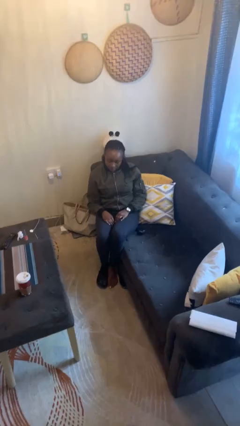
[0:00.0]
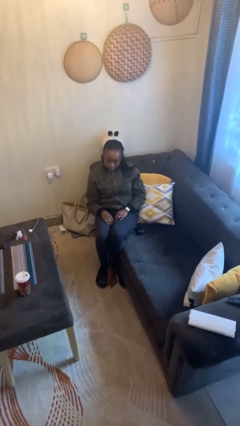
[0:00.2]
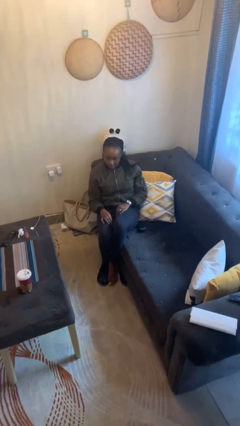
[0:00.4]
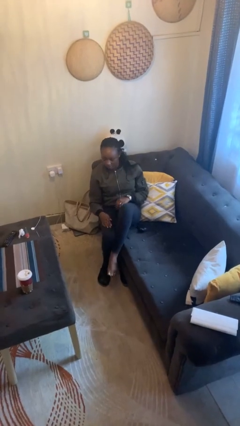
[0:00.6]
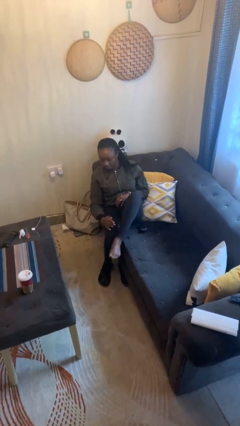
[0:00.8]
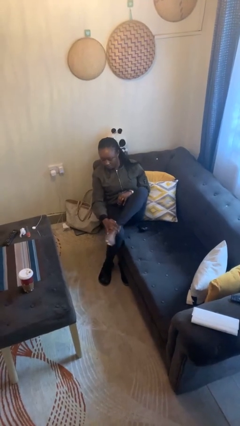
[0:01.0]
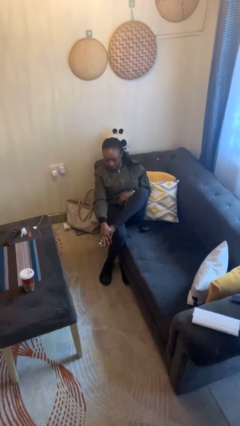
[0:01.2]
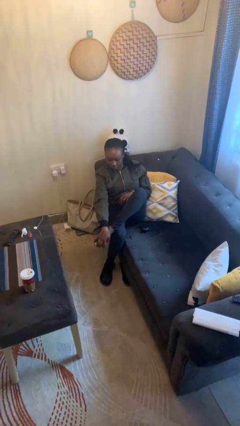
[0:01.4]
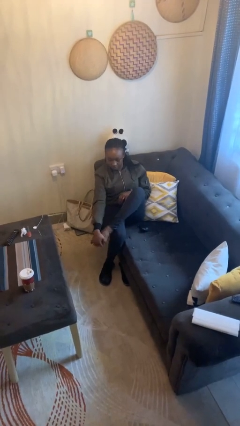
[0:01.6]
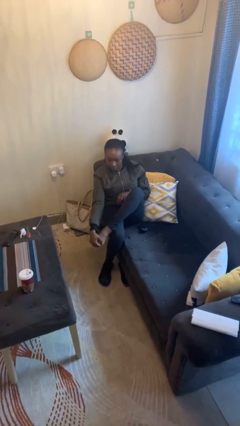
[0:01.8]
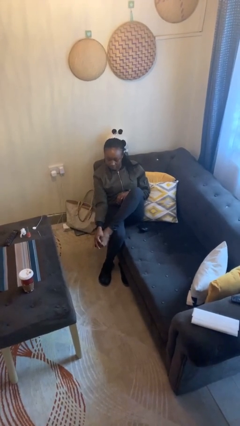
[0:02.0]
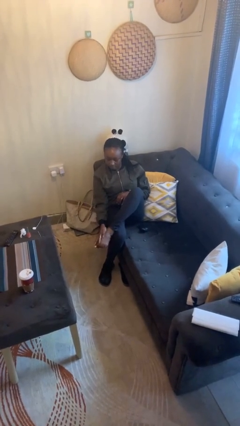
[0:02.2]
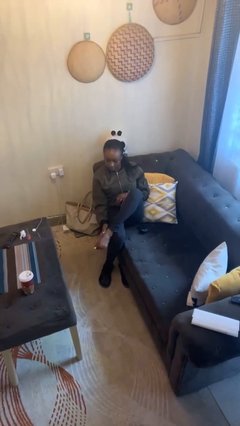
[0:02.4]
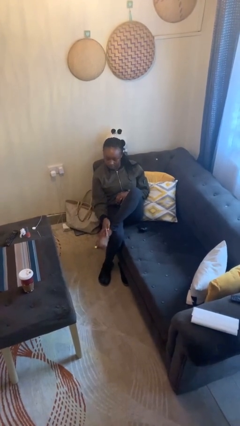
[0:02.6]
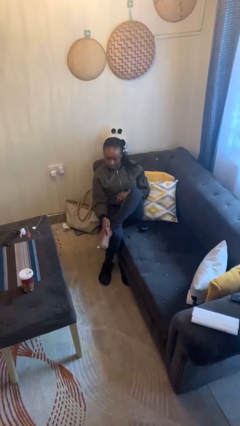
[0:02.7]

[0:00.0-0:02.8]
person rubs foot

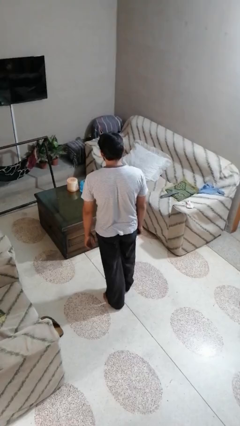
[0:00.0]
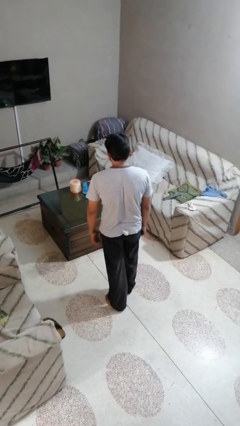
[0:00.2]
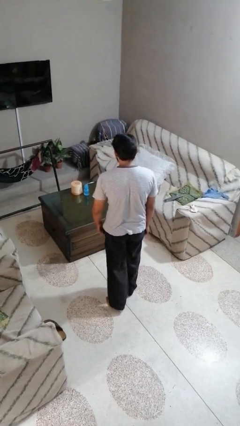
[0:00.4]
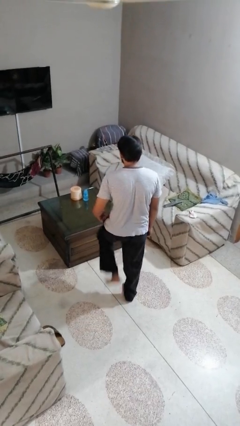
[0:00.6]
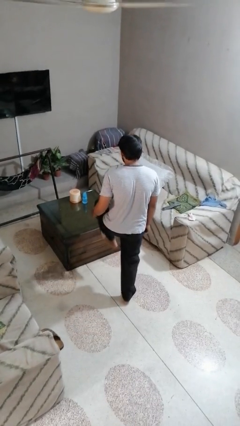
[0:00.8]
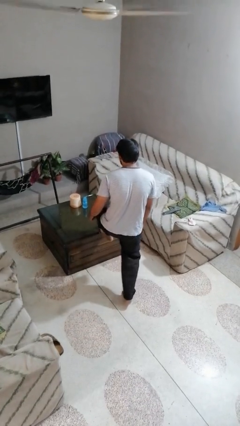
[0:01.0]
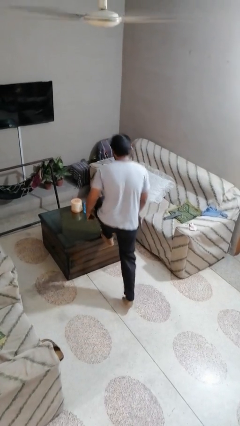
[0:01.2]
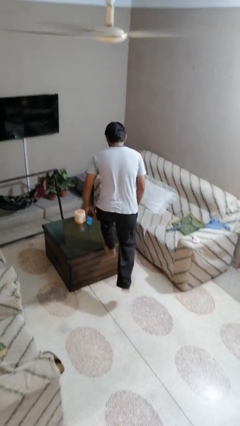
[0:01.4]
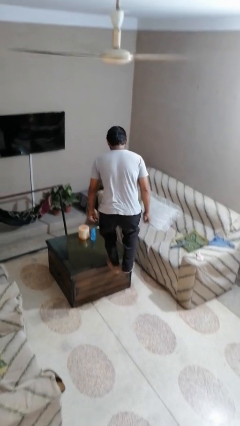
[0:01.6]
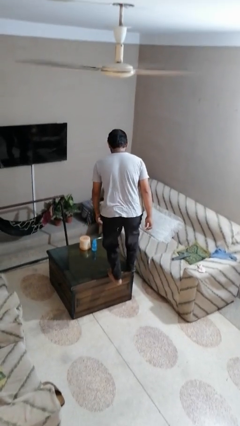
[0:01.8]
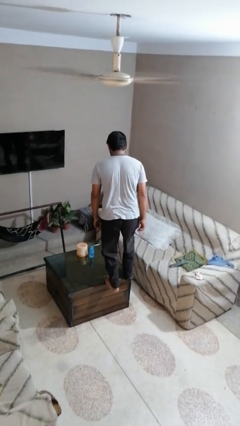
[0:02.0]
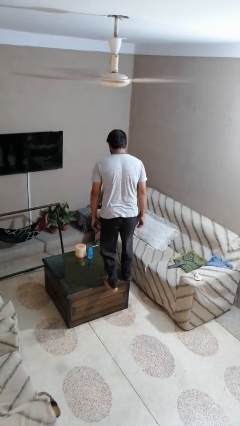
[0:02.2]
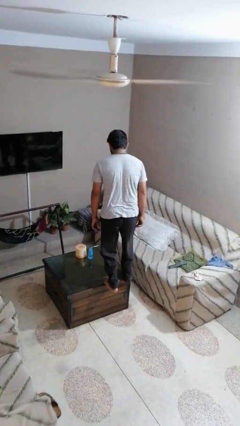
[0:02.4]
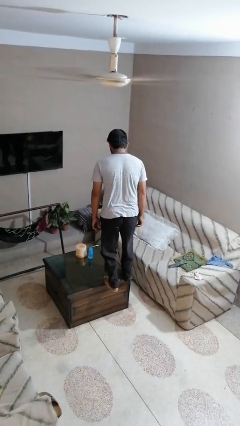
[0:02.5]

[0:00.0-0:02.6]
person climbs on table

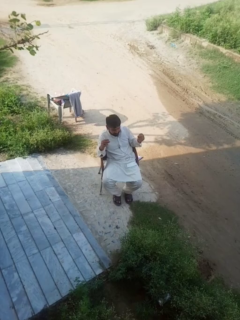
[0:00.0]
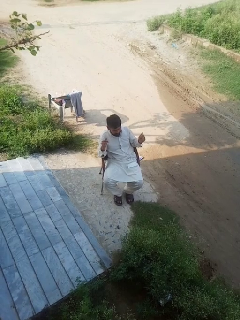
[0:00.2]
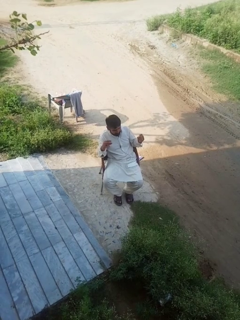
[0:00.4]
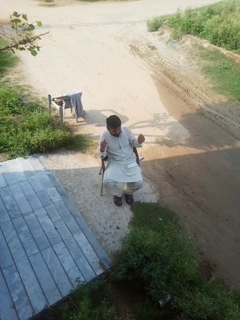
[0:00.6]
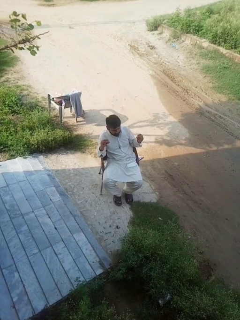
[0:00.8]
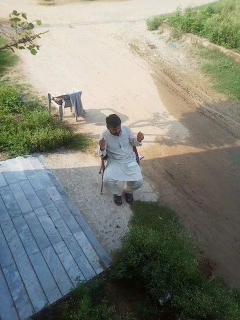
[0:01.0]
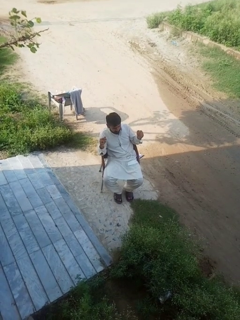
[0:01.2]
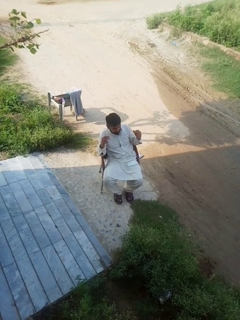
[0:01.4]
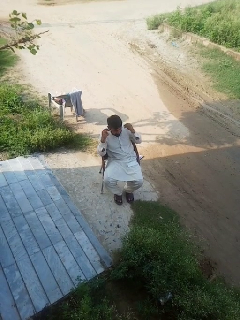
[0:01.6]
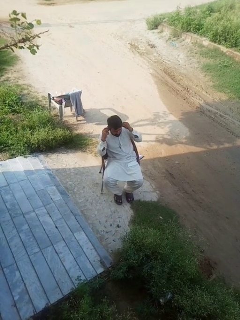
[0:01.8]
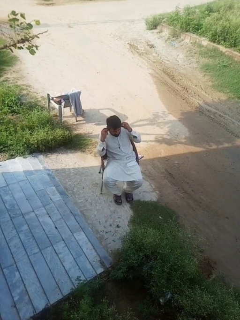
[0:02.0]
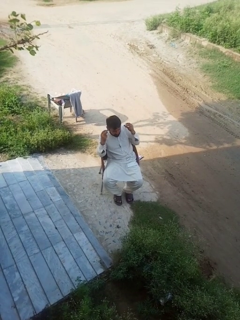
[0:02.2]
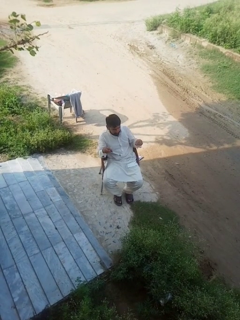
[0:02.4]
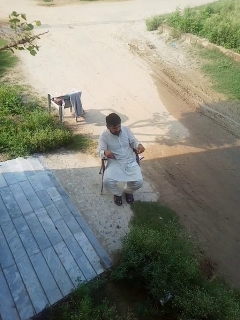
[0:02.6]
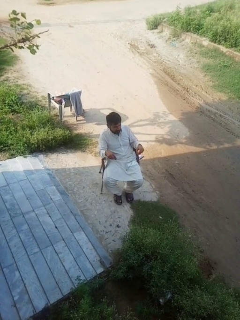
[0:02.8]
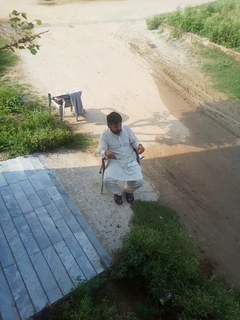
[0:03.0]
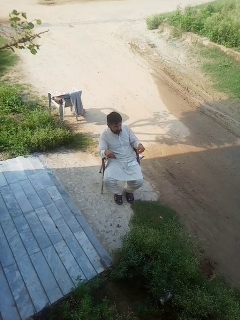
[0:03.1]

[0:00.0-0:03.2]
person takes off headphones

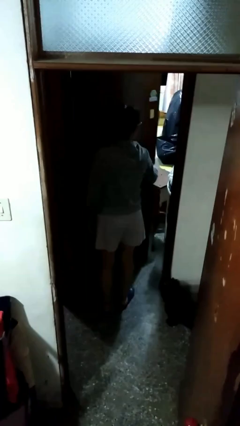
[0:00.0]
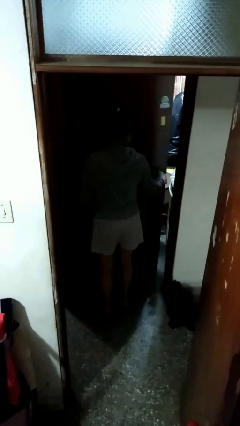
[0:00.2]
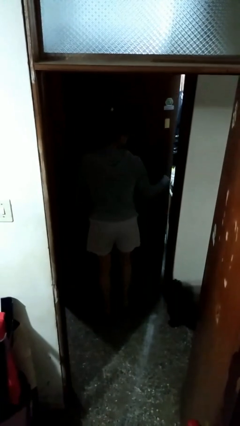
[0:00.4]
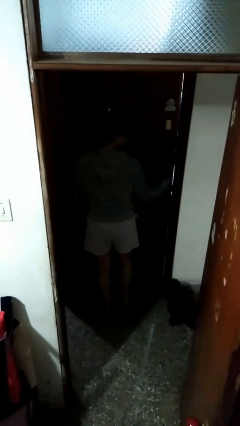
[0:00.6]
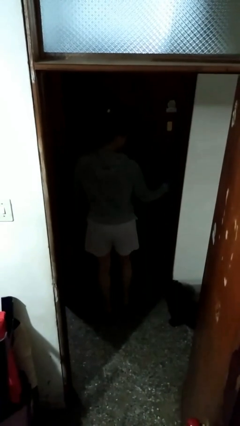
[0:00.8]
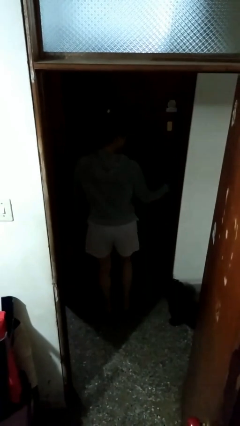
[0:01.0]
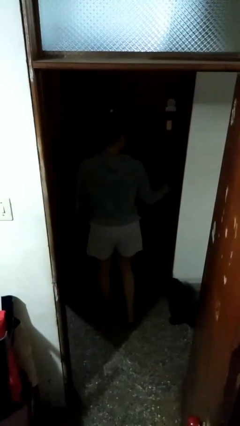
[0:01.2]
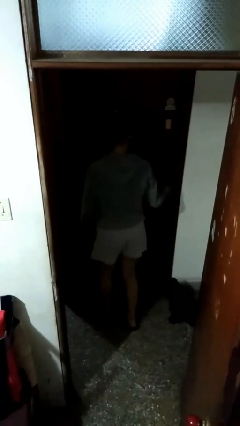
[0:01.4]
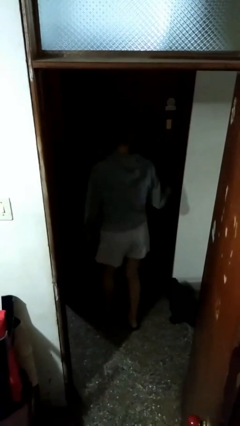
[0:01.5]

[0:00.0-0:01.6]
person closes facility door

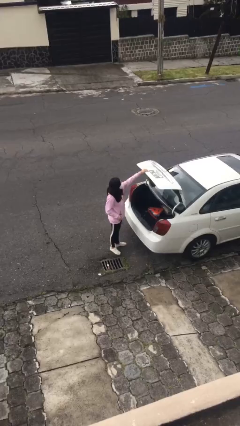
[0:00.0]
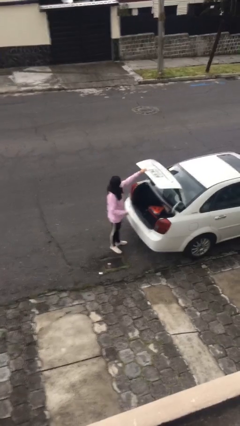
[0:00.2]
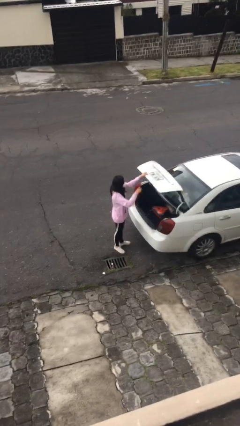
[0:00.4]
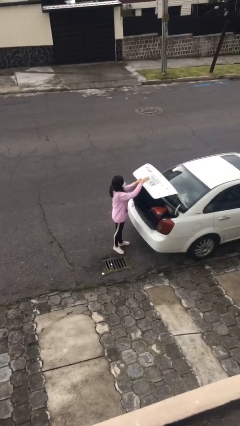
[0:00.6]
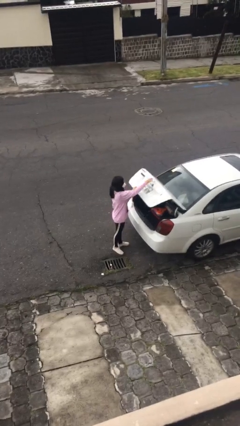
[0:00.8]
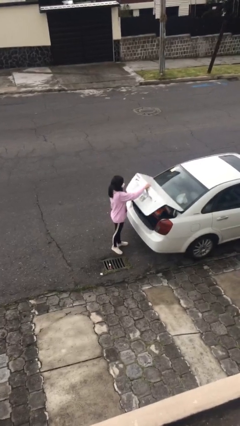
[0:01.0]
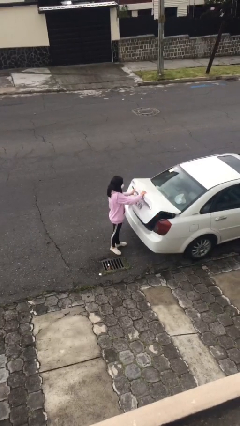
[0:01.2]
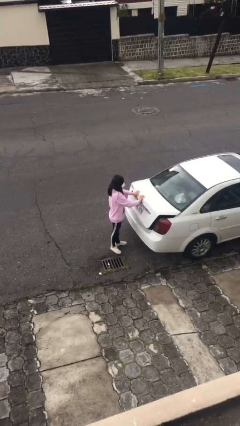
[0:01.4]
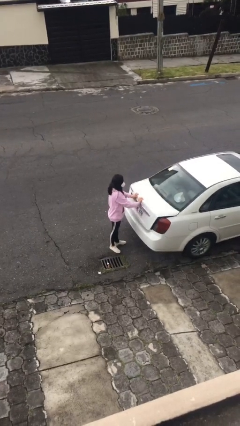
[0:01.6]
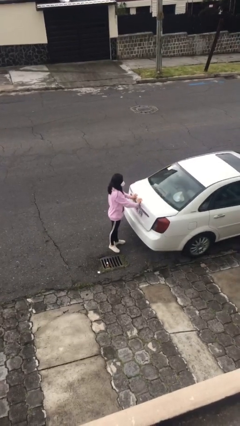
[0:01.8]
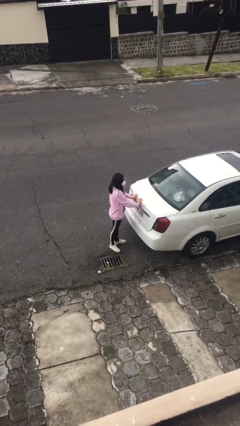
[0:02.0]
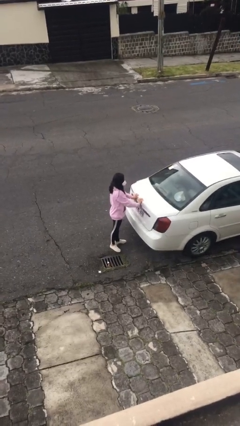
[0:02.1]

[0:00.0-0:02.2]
person closes car trunk

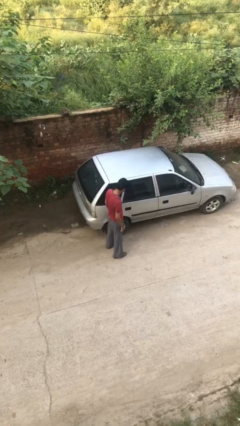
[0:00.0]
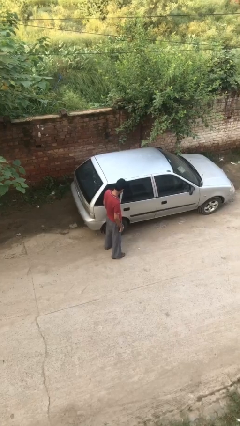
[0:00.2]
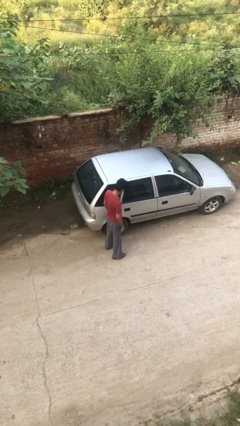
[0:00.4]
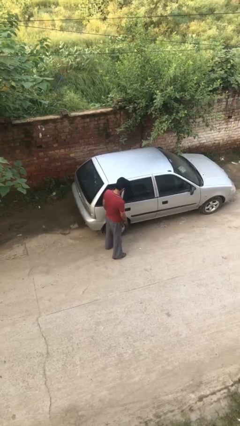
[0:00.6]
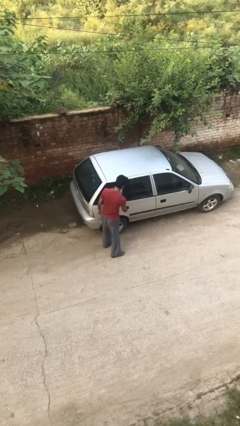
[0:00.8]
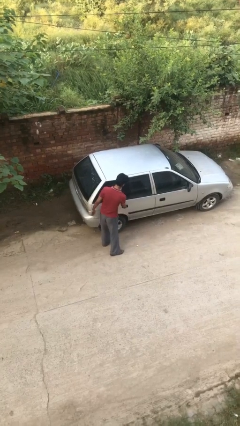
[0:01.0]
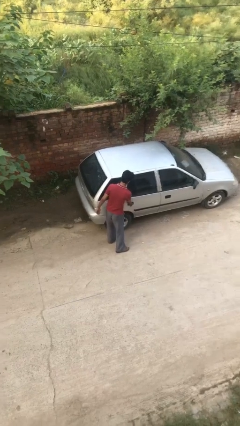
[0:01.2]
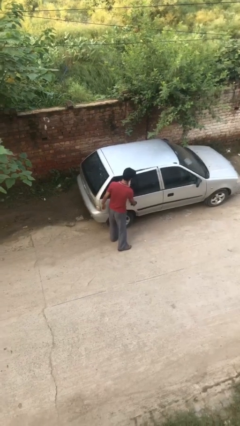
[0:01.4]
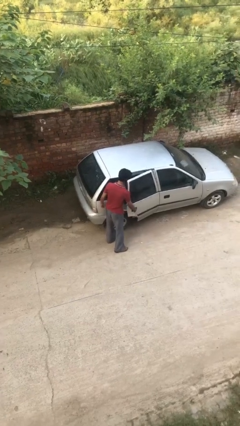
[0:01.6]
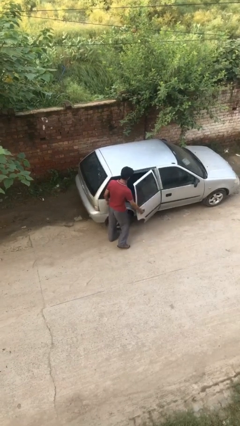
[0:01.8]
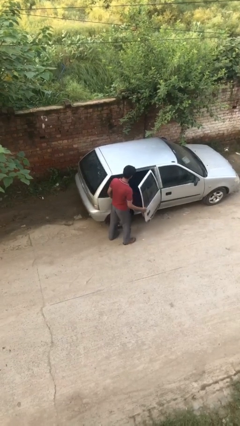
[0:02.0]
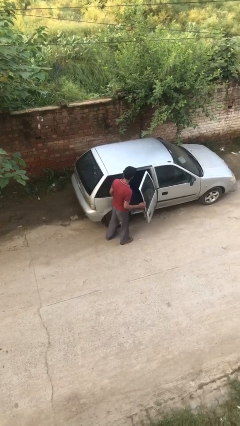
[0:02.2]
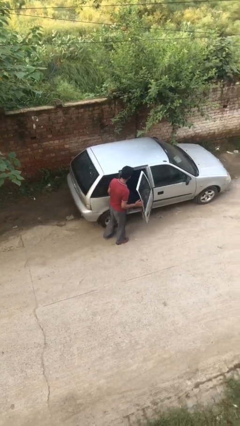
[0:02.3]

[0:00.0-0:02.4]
person opens car door

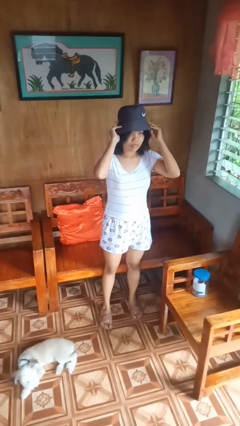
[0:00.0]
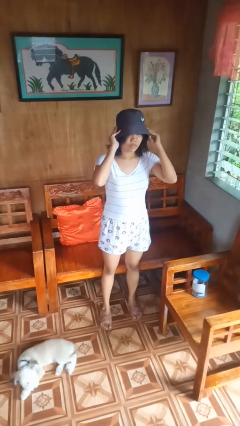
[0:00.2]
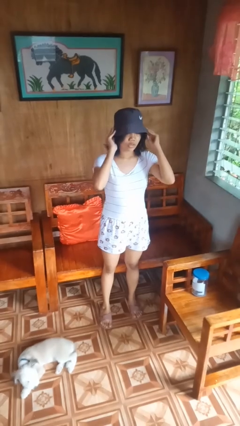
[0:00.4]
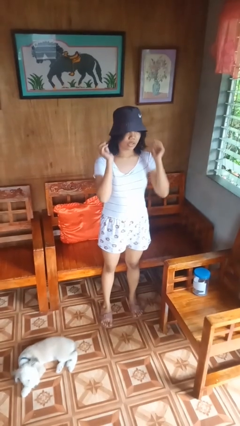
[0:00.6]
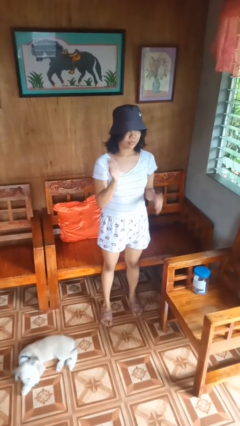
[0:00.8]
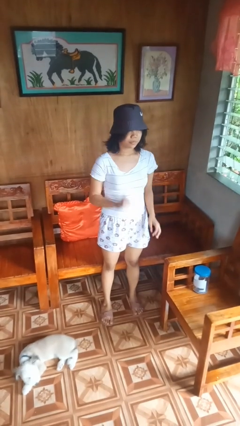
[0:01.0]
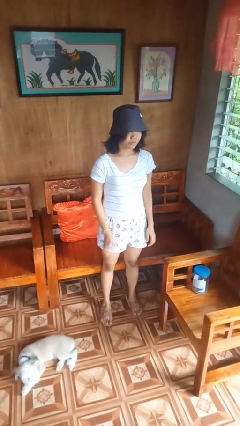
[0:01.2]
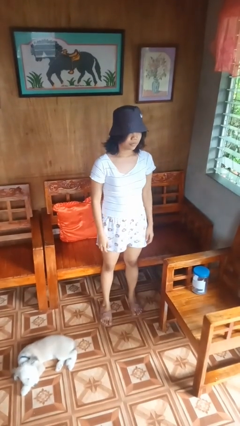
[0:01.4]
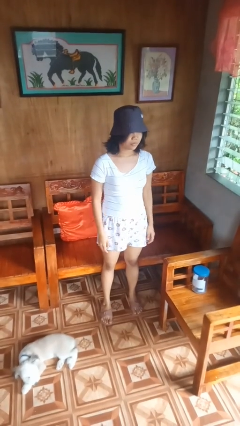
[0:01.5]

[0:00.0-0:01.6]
person puts on hat

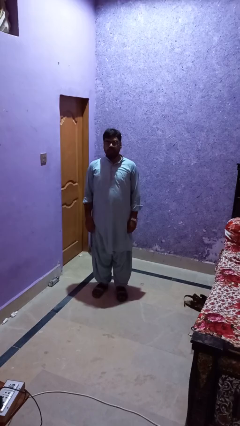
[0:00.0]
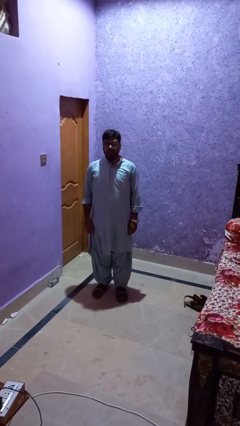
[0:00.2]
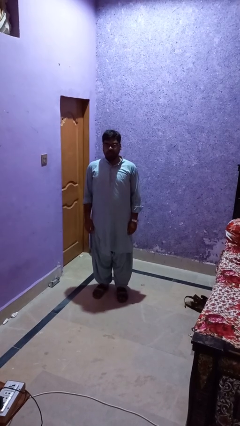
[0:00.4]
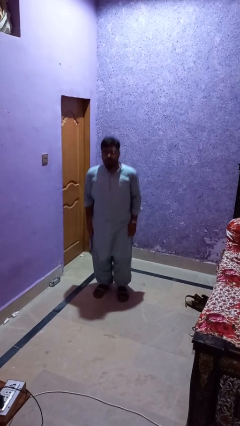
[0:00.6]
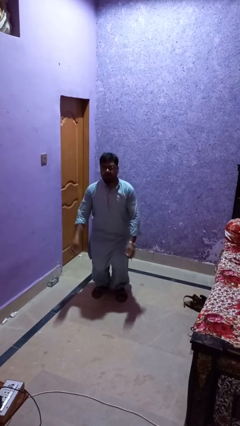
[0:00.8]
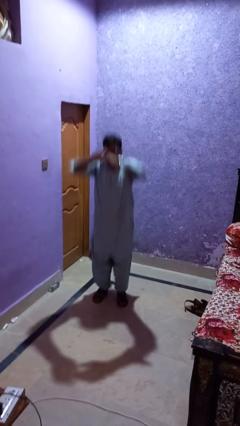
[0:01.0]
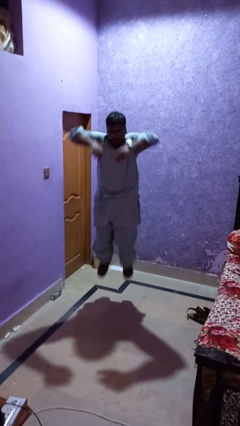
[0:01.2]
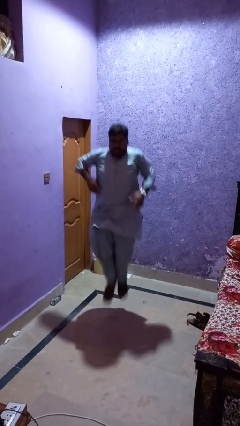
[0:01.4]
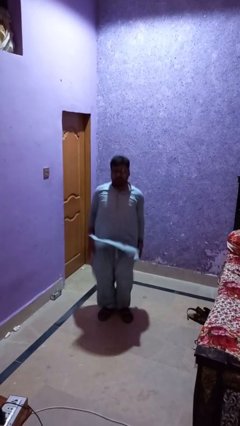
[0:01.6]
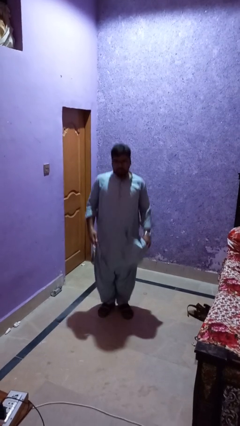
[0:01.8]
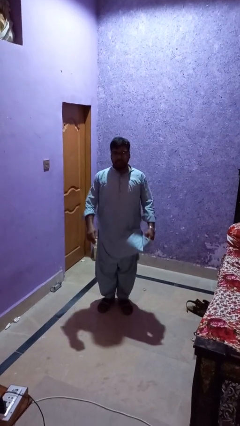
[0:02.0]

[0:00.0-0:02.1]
person jumps
